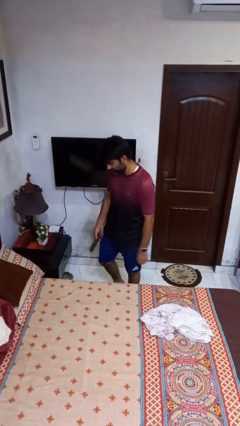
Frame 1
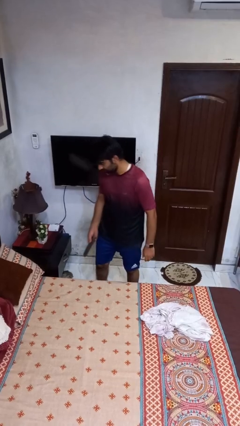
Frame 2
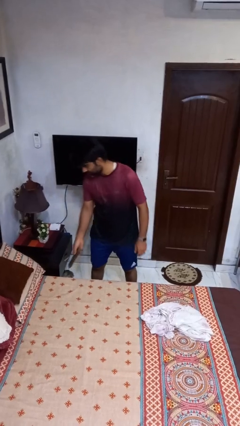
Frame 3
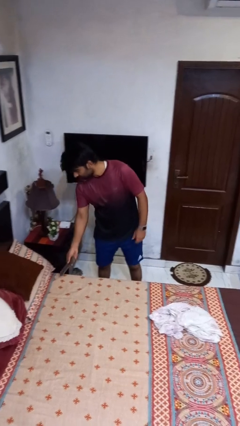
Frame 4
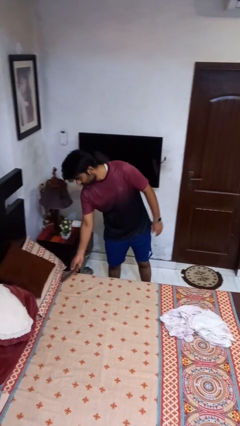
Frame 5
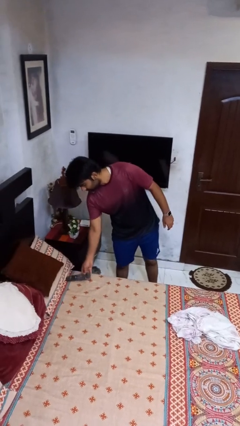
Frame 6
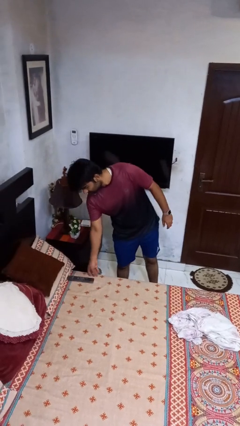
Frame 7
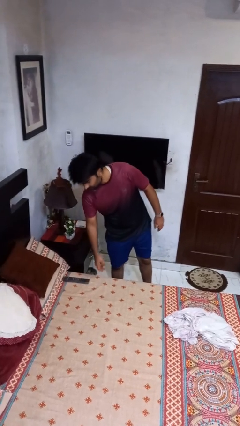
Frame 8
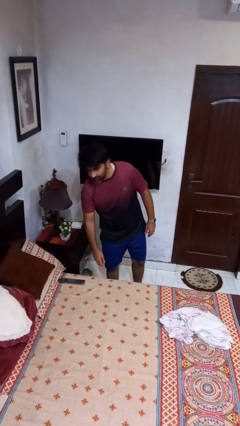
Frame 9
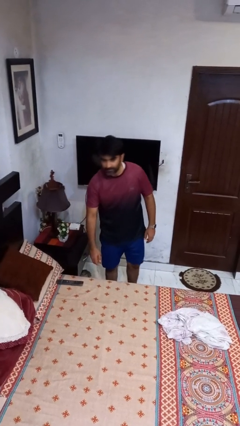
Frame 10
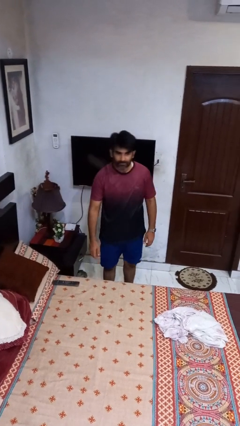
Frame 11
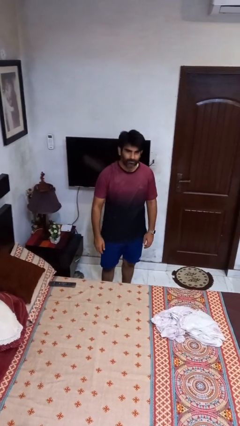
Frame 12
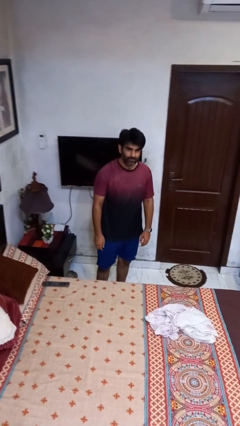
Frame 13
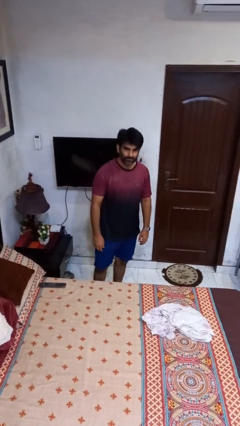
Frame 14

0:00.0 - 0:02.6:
person puts down object on bed

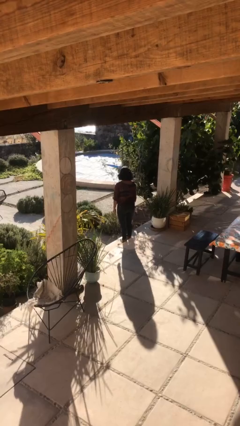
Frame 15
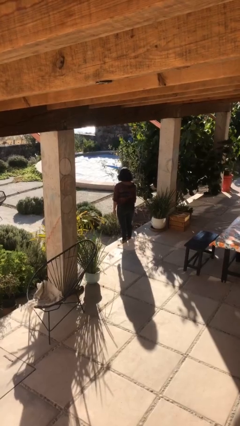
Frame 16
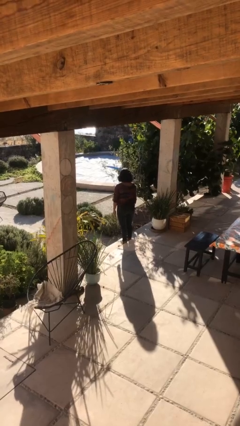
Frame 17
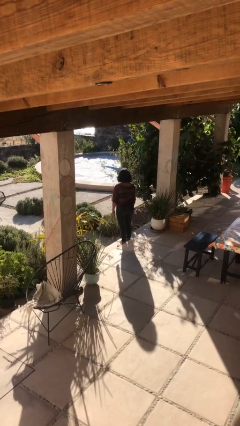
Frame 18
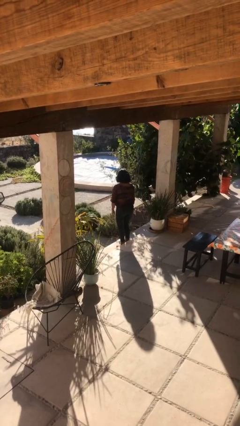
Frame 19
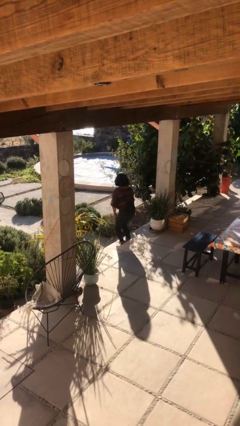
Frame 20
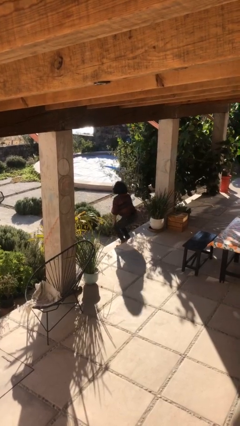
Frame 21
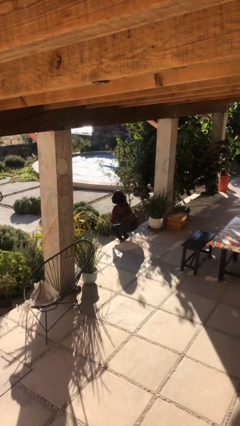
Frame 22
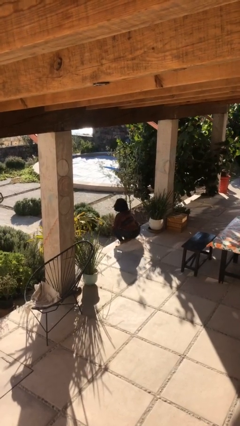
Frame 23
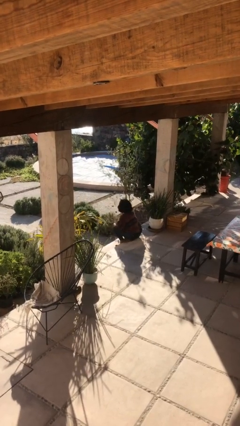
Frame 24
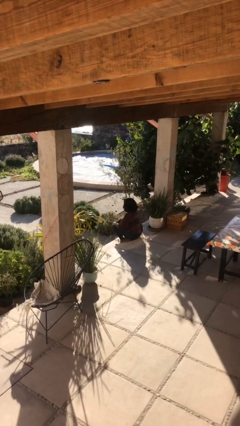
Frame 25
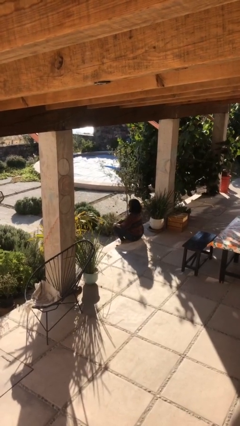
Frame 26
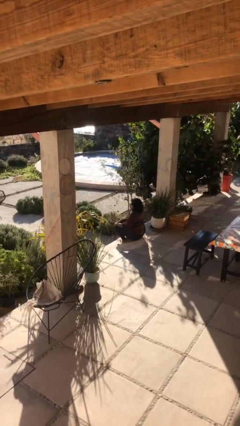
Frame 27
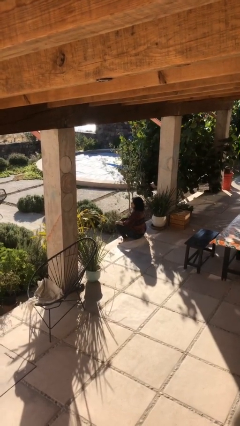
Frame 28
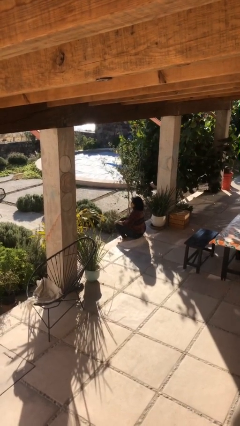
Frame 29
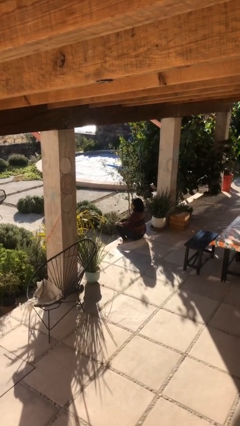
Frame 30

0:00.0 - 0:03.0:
person sits down

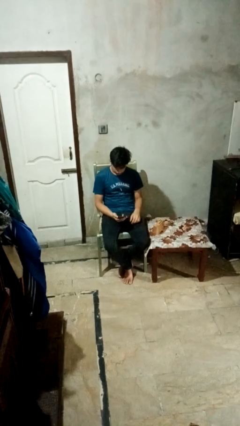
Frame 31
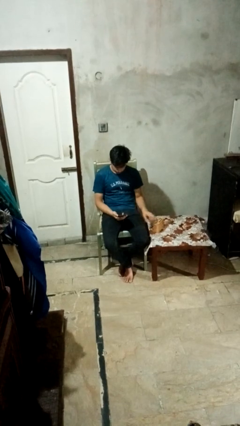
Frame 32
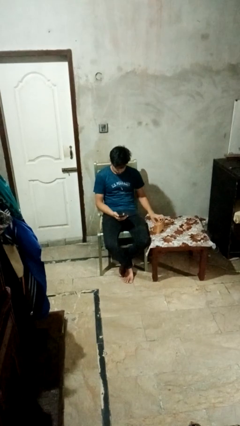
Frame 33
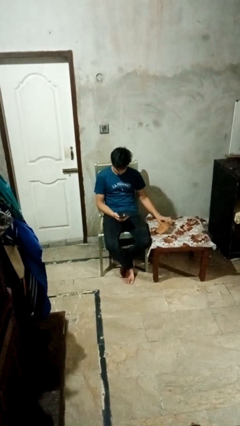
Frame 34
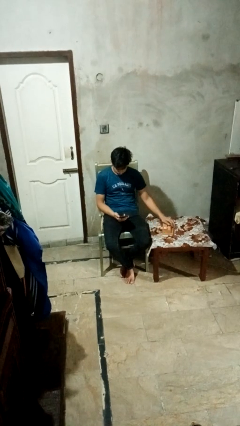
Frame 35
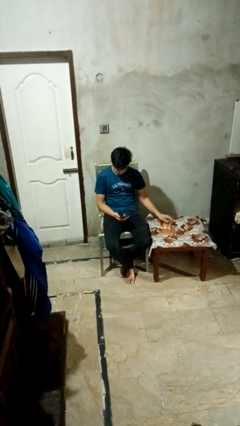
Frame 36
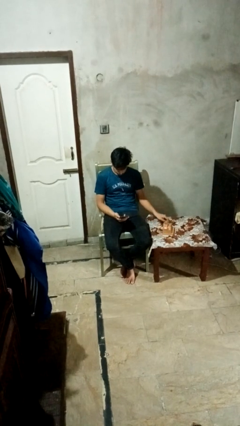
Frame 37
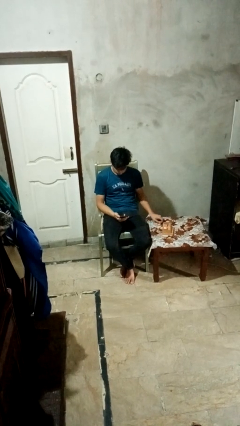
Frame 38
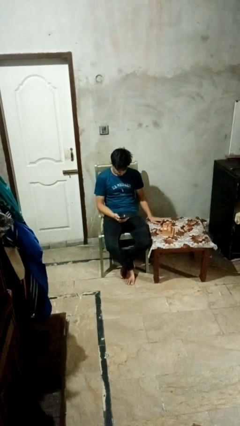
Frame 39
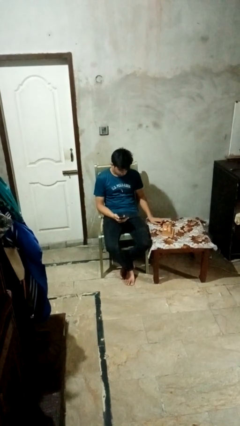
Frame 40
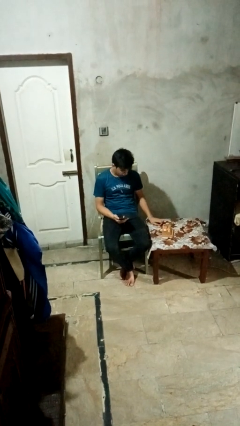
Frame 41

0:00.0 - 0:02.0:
person knocks over furniture

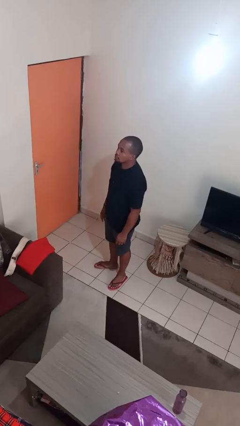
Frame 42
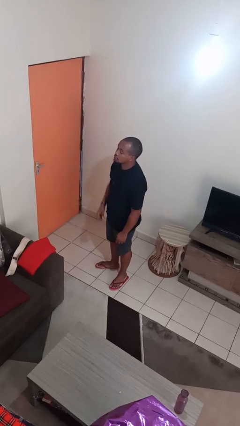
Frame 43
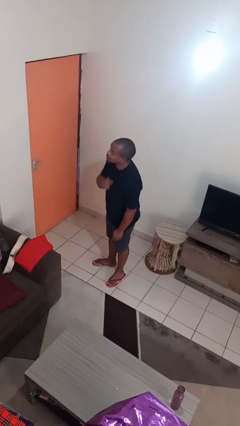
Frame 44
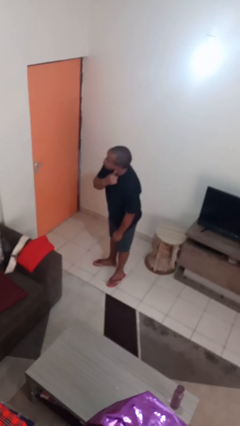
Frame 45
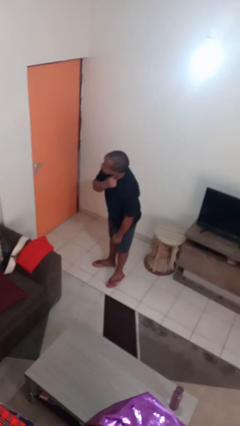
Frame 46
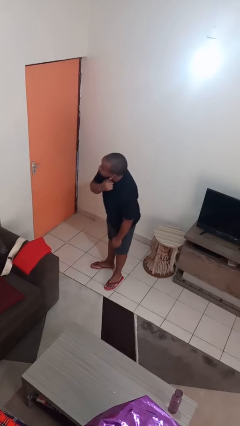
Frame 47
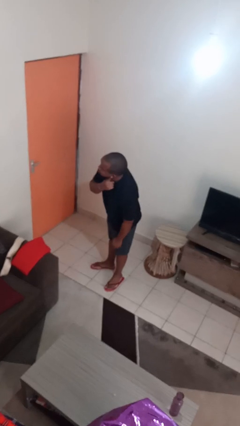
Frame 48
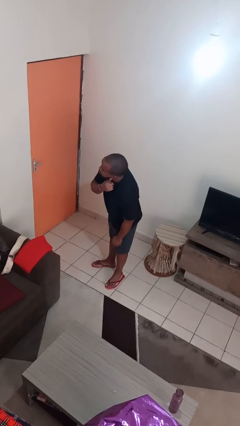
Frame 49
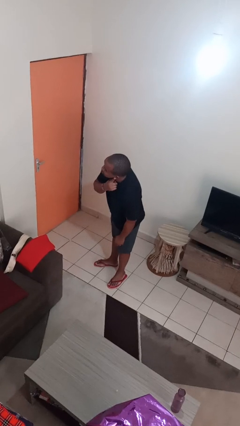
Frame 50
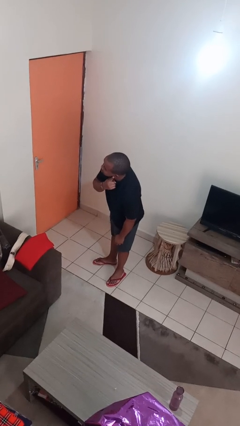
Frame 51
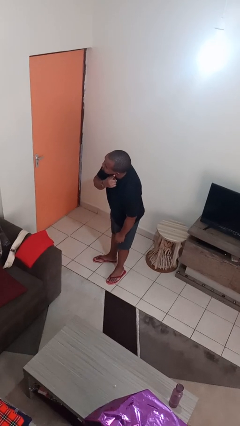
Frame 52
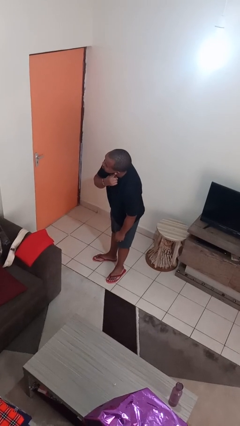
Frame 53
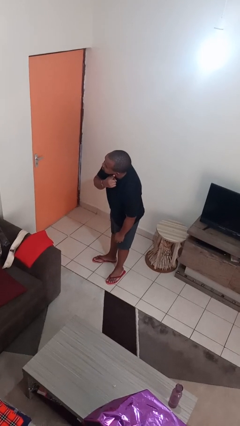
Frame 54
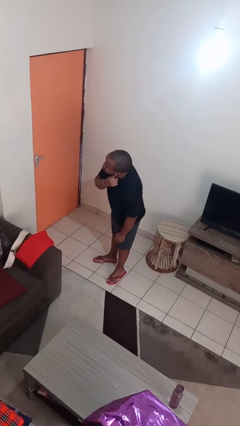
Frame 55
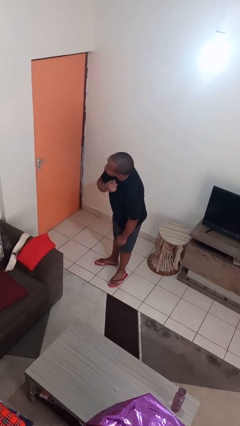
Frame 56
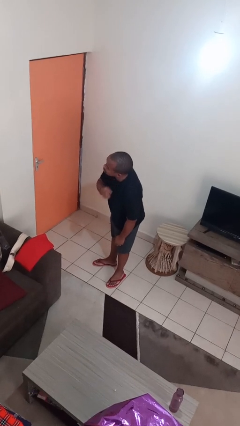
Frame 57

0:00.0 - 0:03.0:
person gestures listen closely

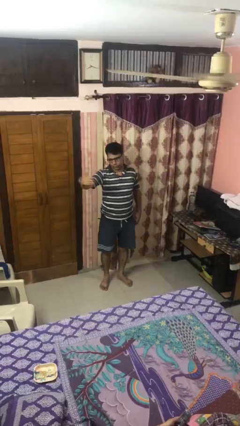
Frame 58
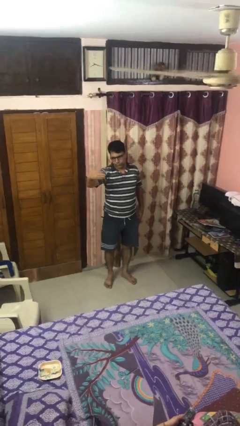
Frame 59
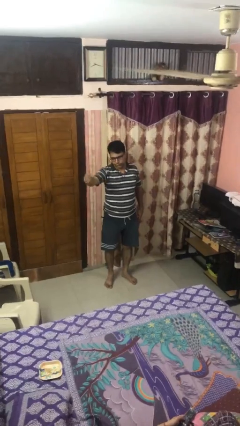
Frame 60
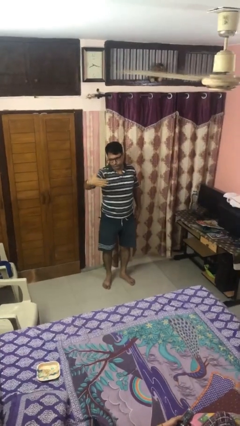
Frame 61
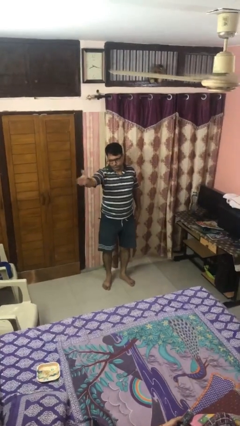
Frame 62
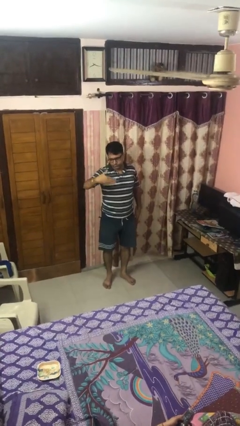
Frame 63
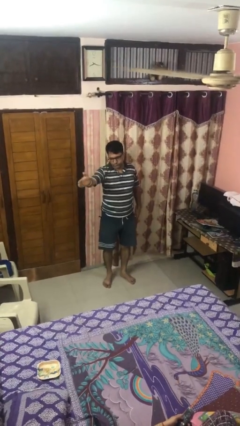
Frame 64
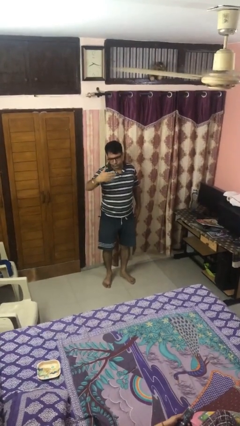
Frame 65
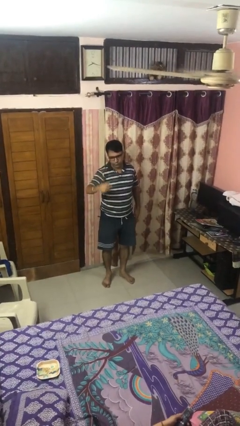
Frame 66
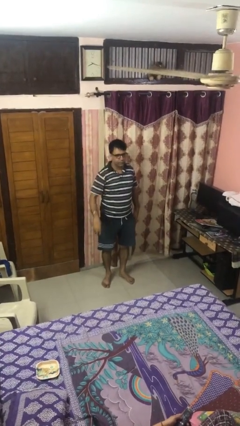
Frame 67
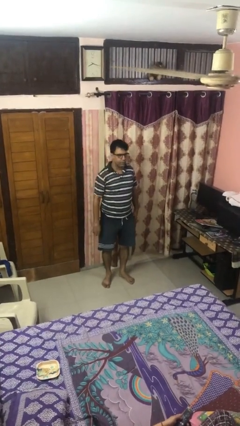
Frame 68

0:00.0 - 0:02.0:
person gestures come here

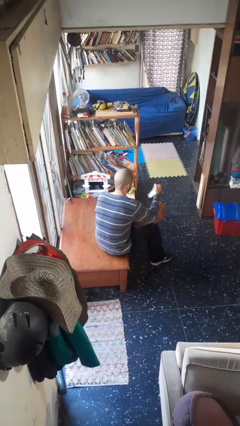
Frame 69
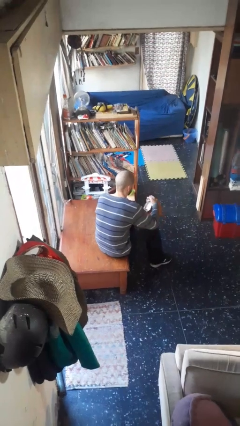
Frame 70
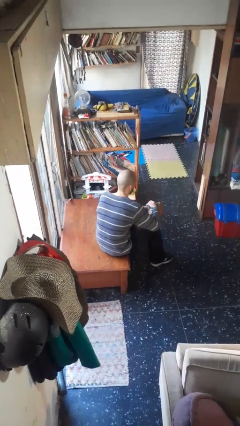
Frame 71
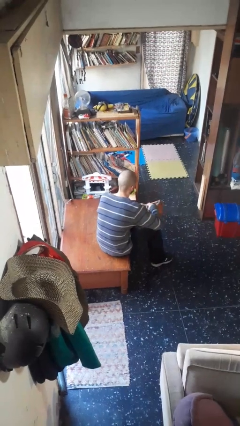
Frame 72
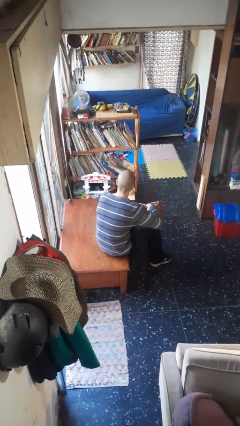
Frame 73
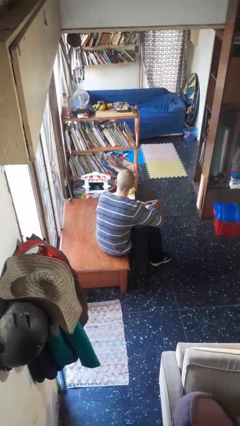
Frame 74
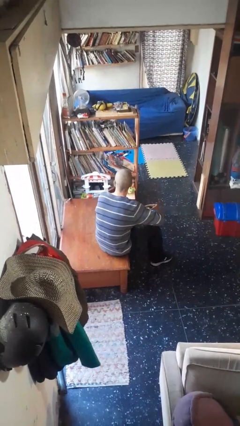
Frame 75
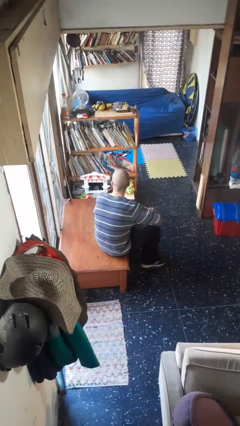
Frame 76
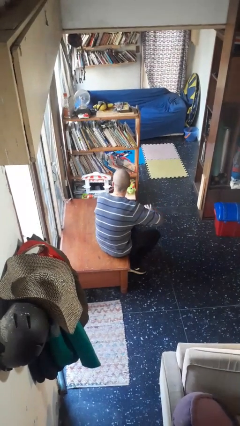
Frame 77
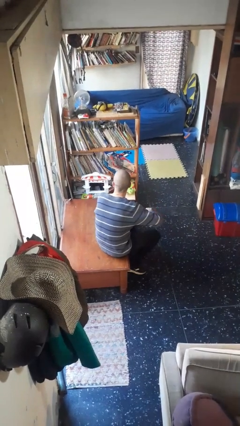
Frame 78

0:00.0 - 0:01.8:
person puts object into purse

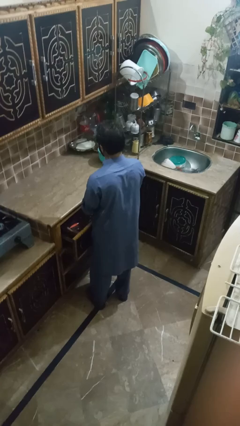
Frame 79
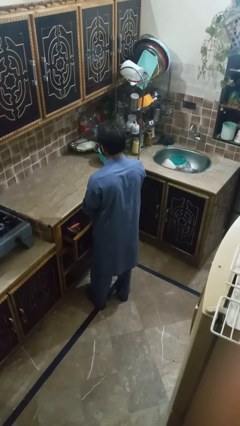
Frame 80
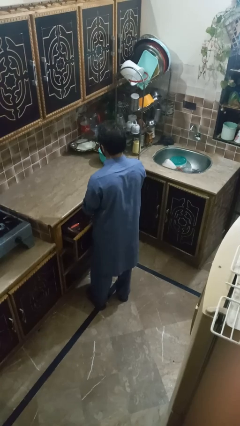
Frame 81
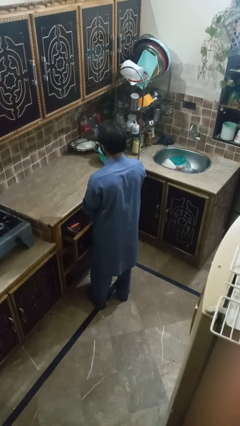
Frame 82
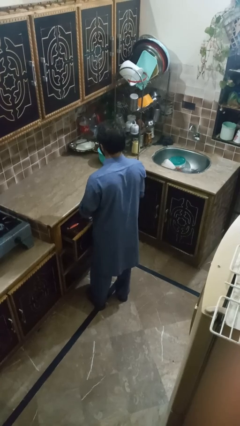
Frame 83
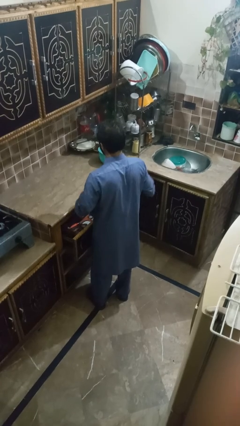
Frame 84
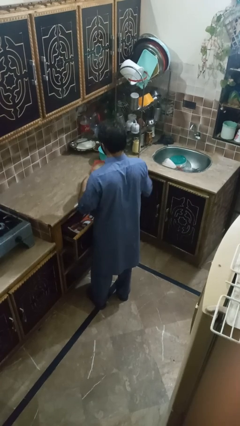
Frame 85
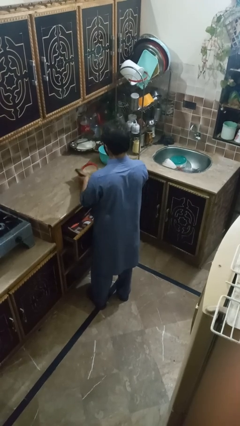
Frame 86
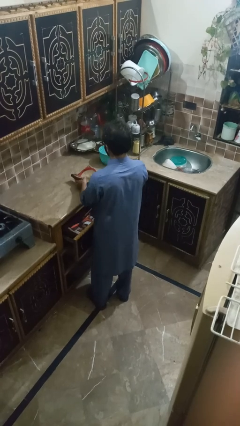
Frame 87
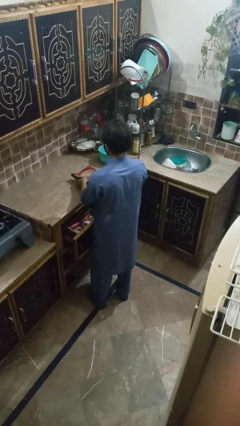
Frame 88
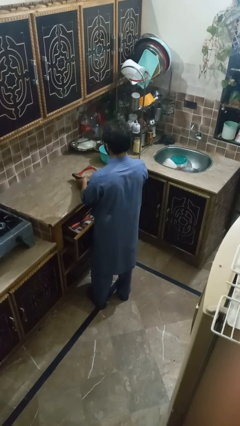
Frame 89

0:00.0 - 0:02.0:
person takes object from kitchen drawer

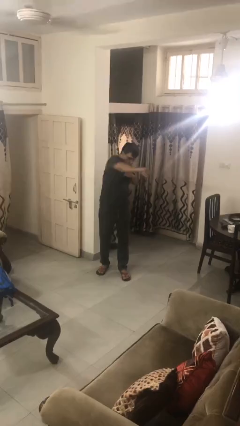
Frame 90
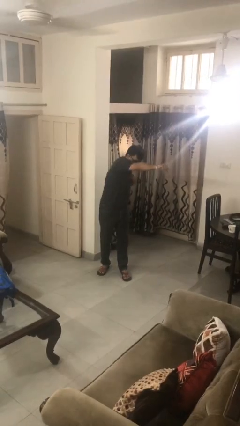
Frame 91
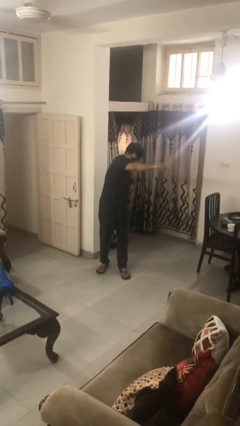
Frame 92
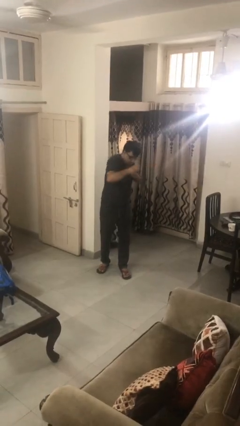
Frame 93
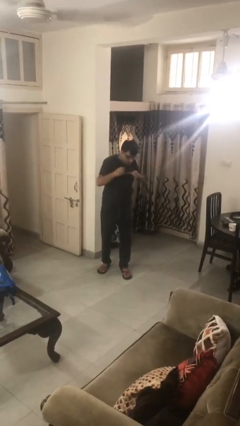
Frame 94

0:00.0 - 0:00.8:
person punches
